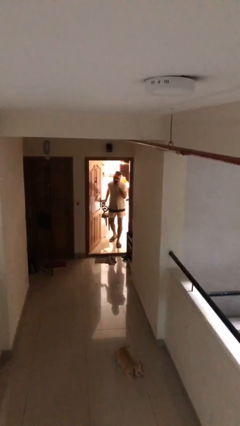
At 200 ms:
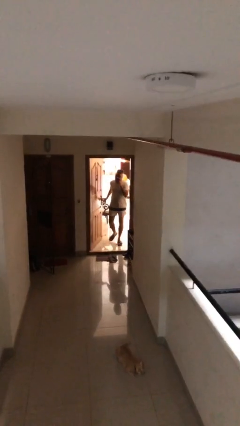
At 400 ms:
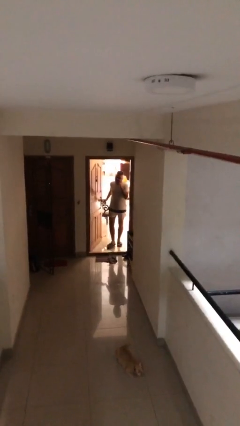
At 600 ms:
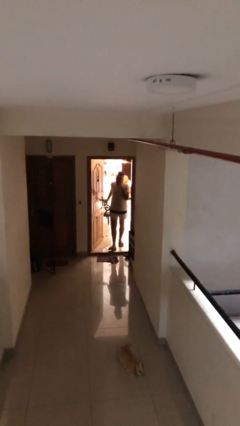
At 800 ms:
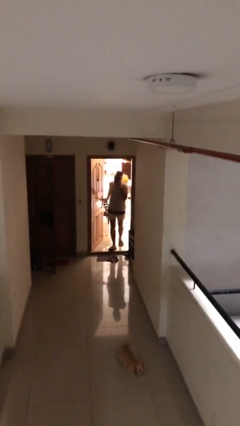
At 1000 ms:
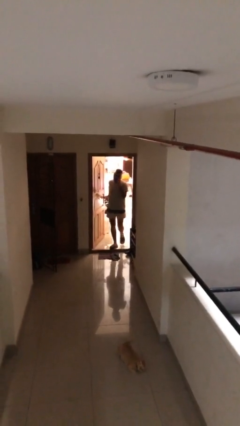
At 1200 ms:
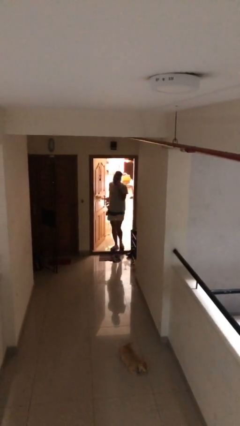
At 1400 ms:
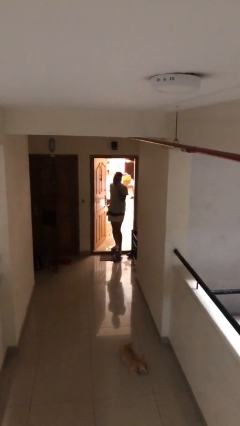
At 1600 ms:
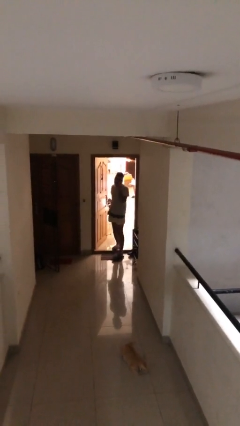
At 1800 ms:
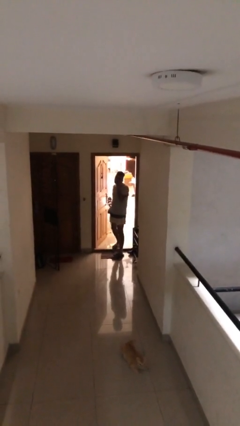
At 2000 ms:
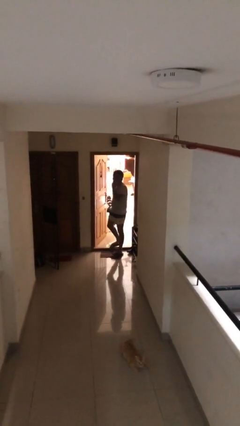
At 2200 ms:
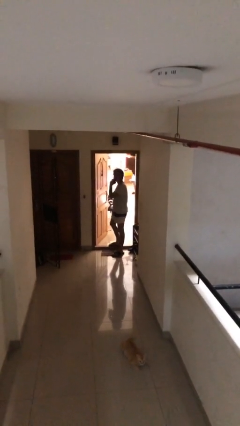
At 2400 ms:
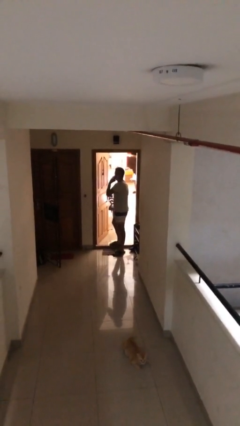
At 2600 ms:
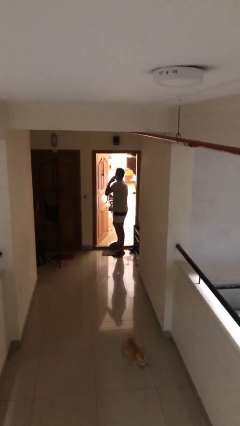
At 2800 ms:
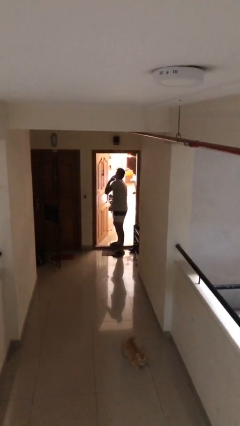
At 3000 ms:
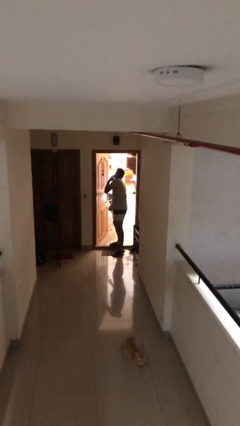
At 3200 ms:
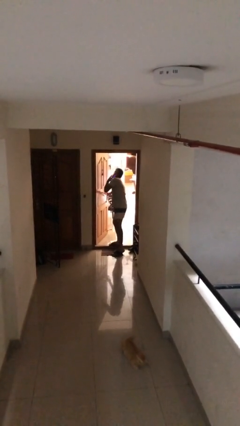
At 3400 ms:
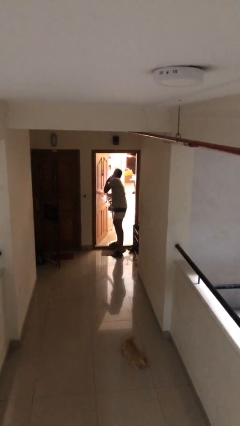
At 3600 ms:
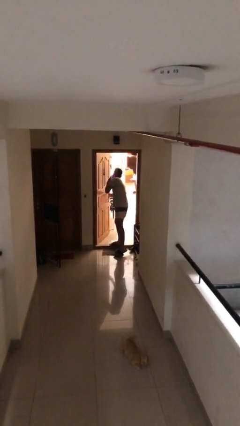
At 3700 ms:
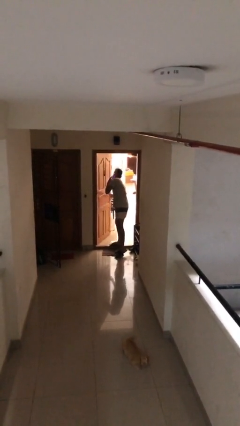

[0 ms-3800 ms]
person enters scene through structure

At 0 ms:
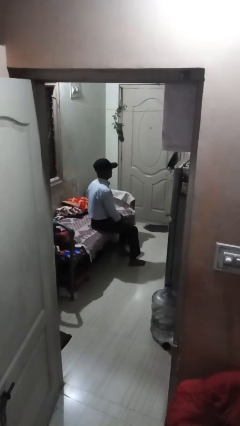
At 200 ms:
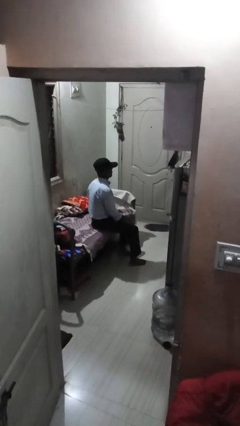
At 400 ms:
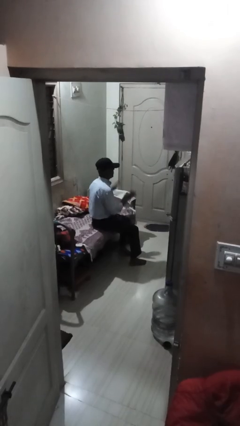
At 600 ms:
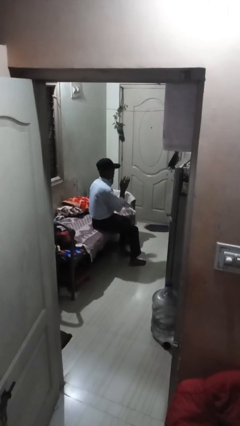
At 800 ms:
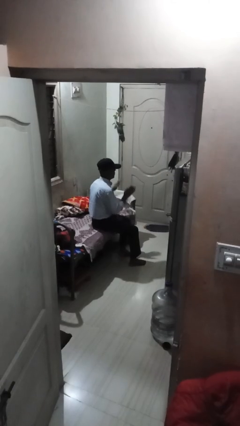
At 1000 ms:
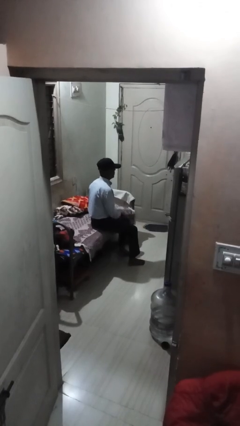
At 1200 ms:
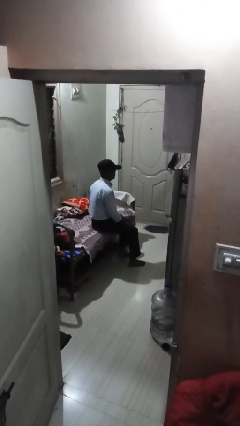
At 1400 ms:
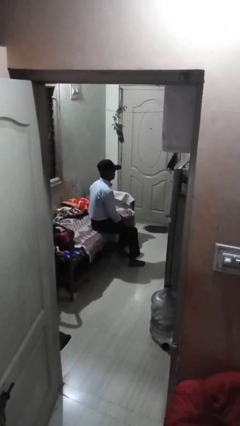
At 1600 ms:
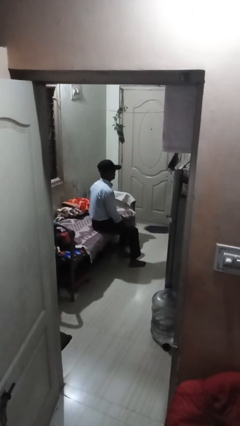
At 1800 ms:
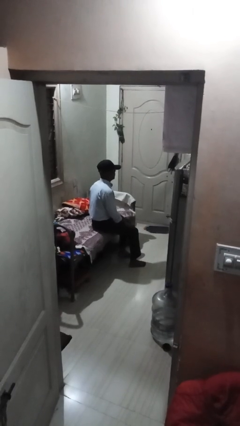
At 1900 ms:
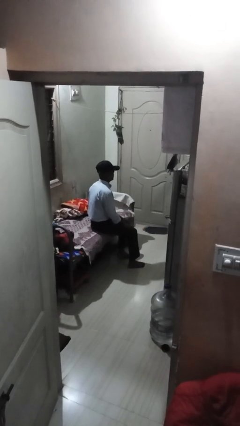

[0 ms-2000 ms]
person slaps hands on thighs

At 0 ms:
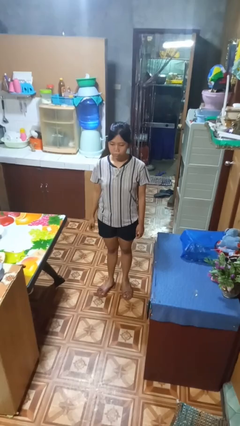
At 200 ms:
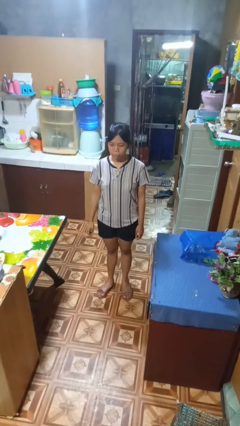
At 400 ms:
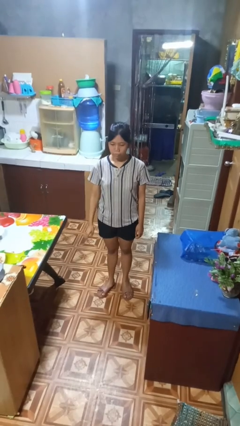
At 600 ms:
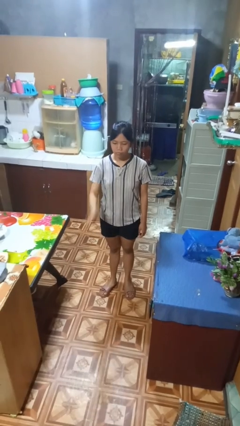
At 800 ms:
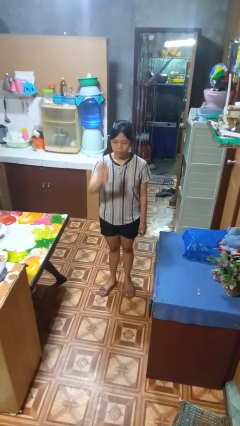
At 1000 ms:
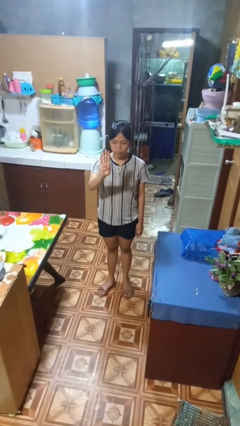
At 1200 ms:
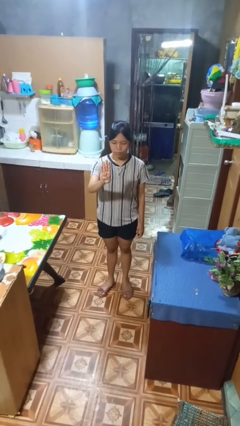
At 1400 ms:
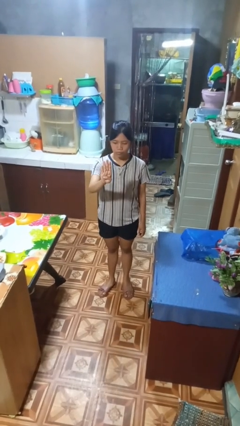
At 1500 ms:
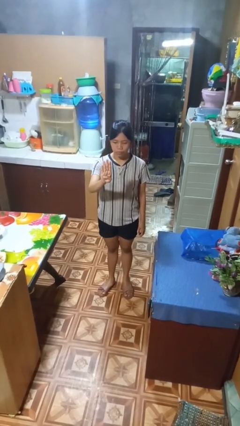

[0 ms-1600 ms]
person gestures number four

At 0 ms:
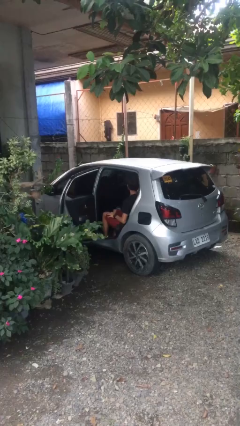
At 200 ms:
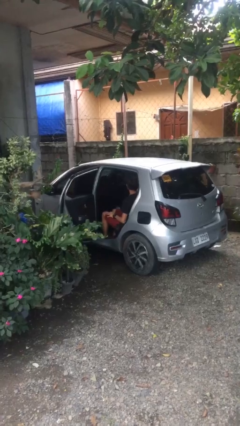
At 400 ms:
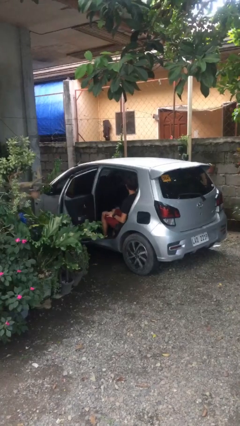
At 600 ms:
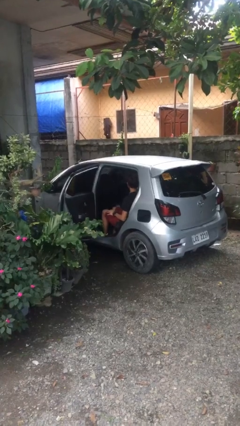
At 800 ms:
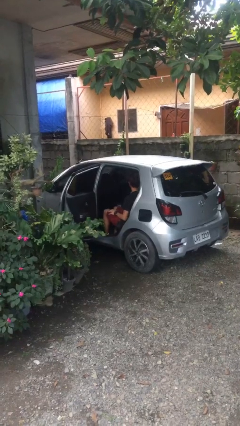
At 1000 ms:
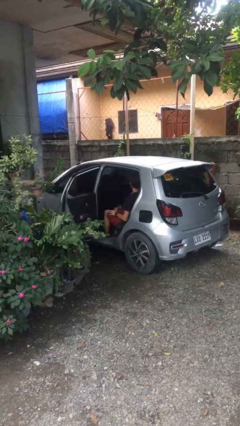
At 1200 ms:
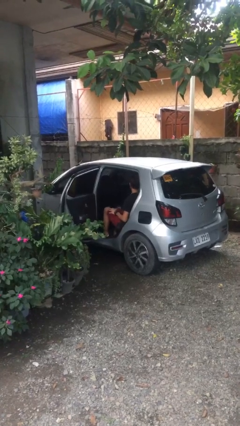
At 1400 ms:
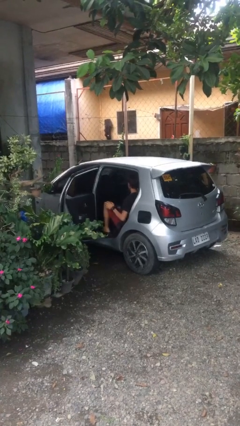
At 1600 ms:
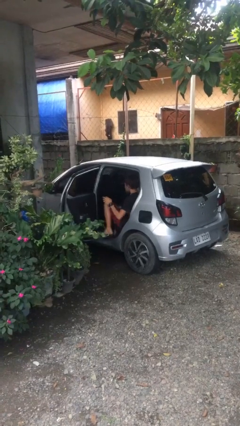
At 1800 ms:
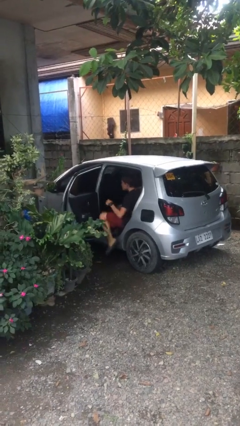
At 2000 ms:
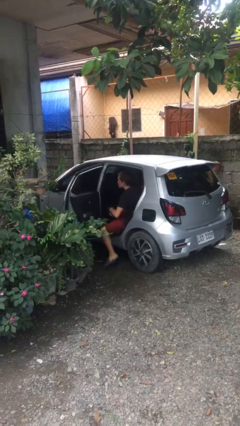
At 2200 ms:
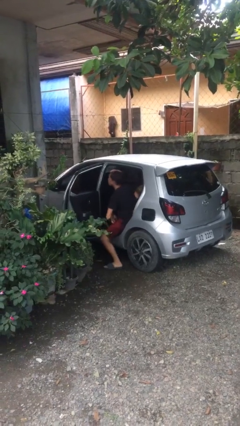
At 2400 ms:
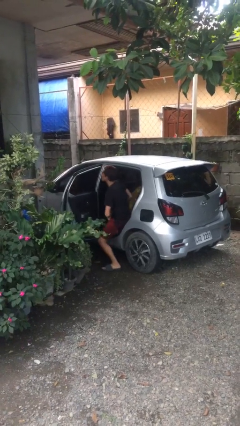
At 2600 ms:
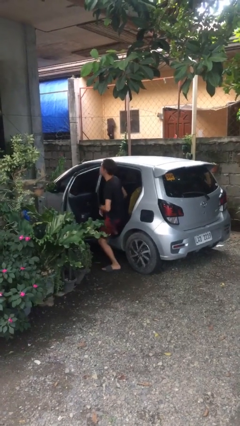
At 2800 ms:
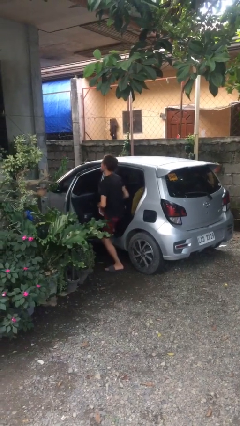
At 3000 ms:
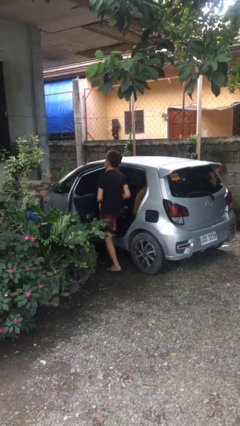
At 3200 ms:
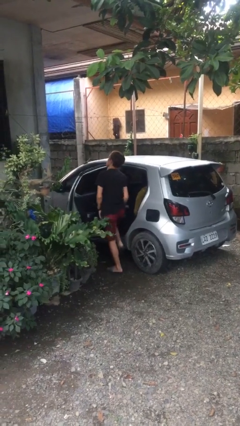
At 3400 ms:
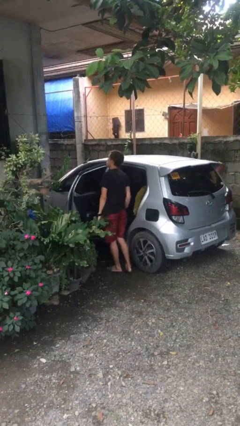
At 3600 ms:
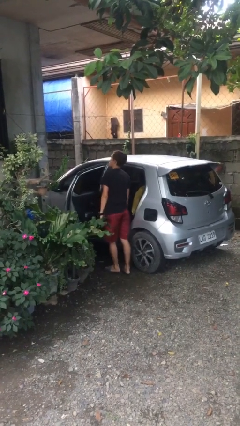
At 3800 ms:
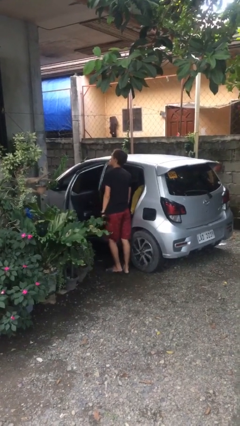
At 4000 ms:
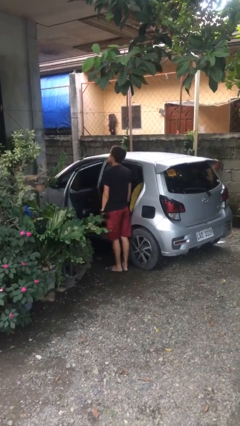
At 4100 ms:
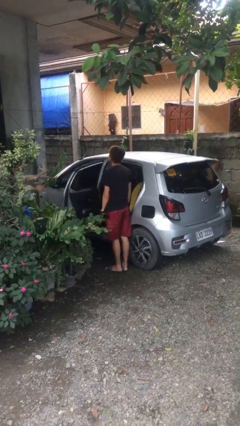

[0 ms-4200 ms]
person exits car

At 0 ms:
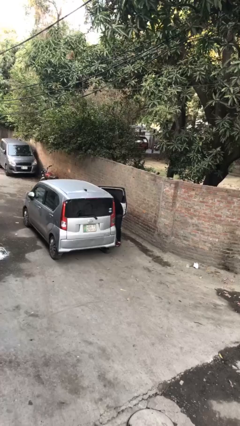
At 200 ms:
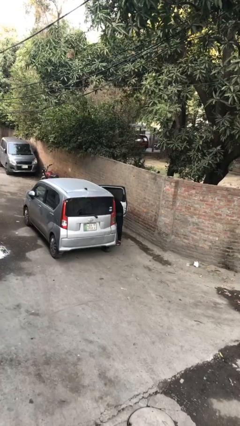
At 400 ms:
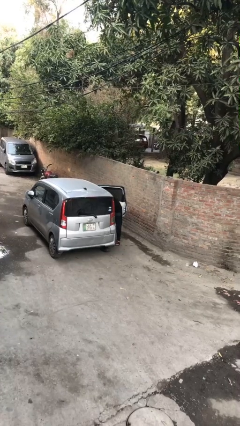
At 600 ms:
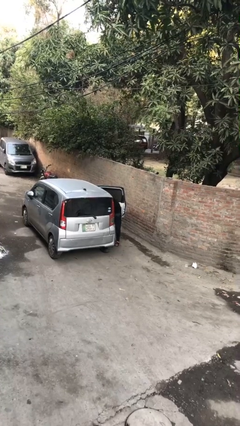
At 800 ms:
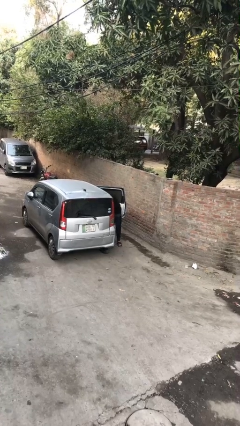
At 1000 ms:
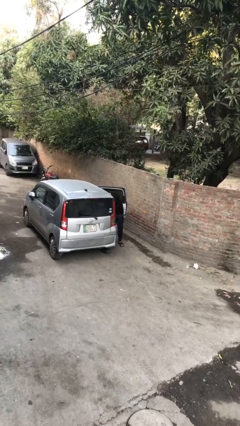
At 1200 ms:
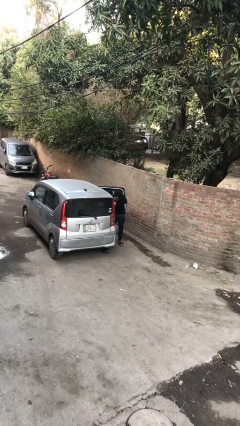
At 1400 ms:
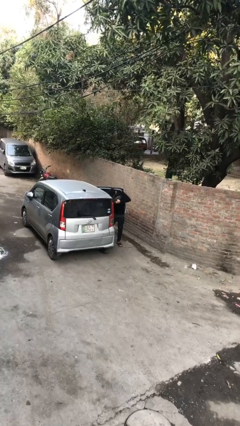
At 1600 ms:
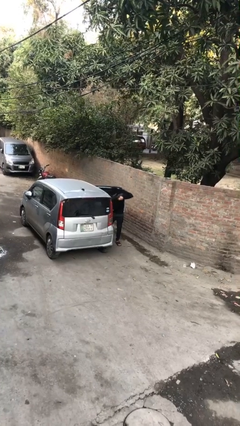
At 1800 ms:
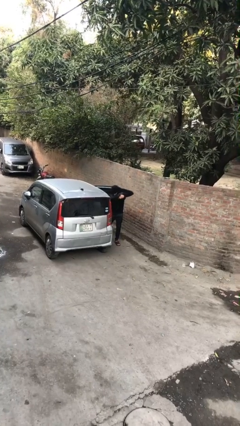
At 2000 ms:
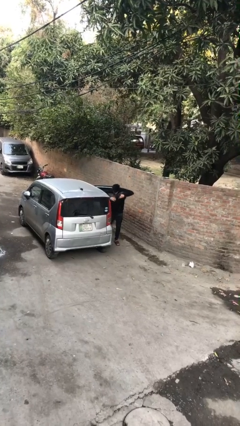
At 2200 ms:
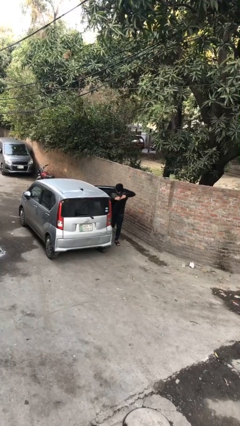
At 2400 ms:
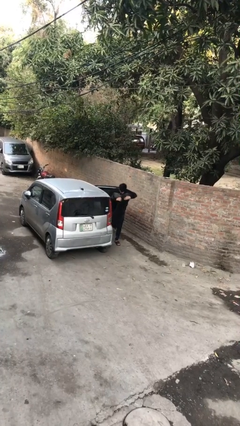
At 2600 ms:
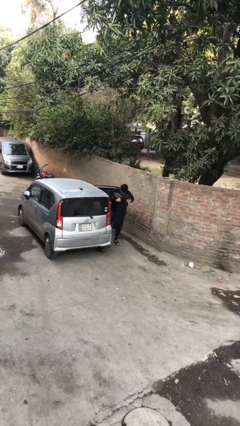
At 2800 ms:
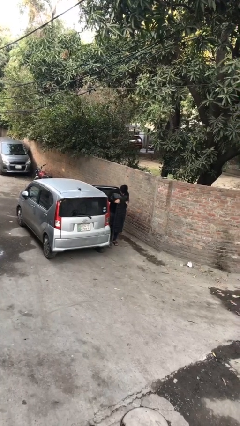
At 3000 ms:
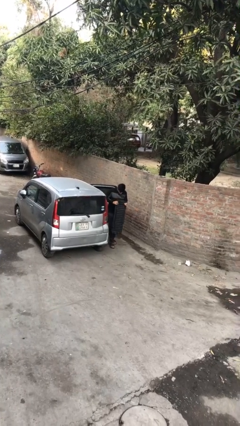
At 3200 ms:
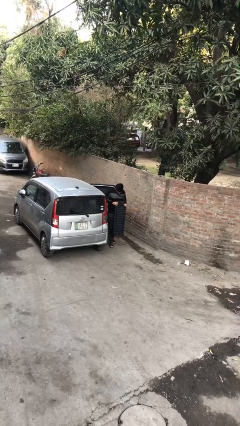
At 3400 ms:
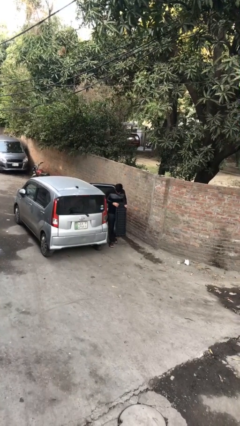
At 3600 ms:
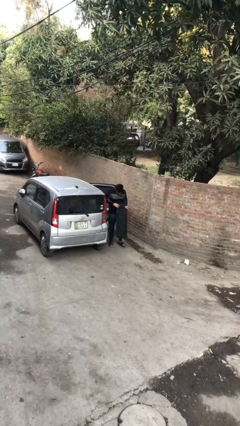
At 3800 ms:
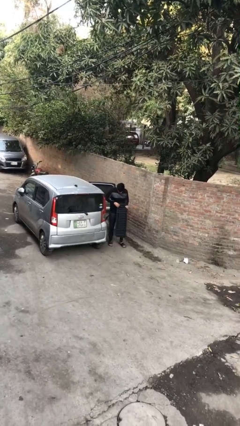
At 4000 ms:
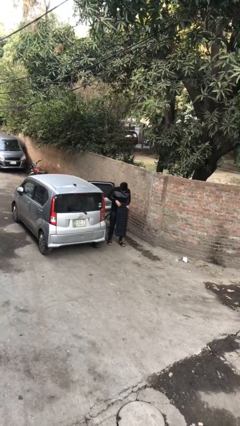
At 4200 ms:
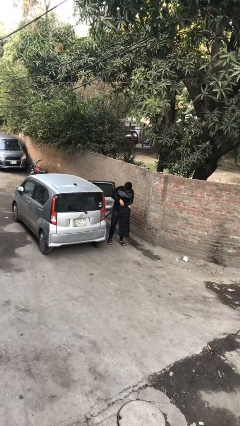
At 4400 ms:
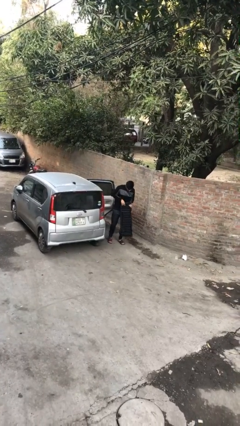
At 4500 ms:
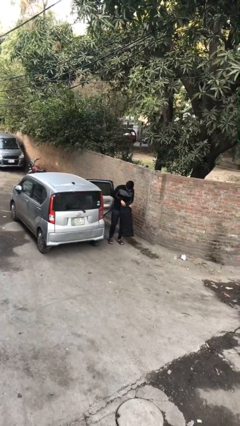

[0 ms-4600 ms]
person unloads car

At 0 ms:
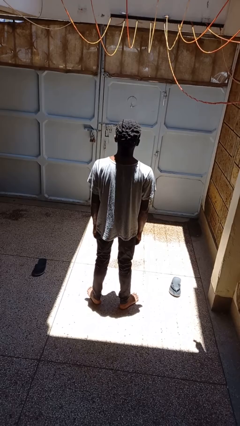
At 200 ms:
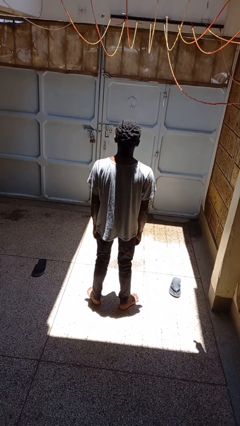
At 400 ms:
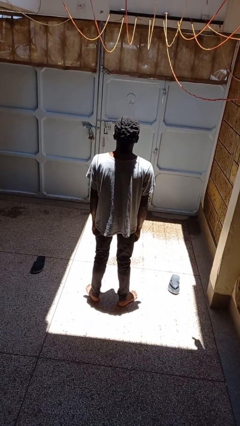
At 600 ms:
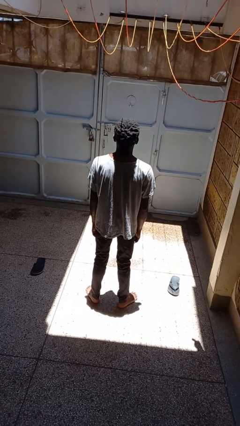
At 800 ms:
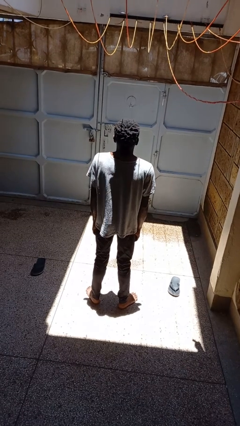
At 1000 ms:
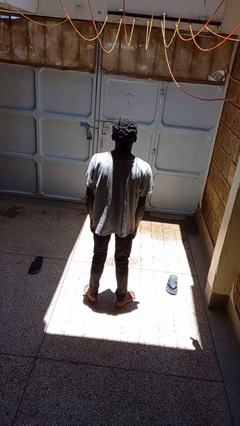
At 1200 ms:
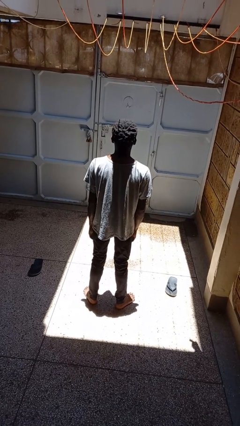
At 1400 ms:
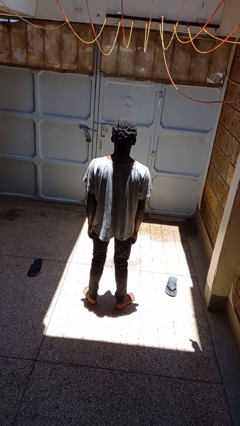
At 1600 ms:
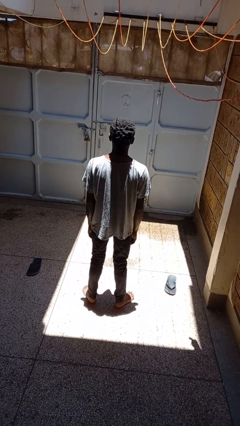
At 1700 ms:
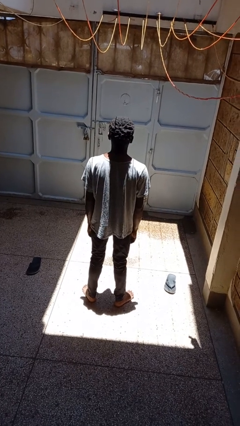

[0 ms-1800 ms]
person shrugs
